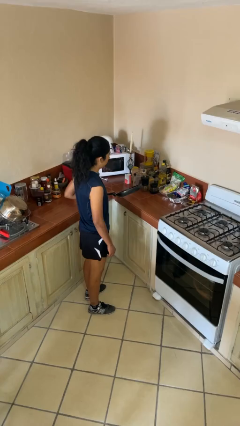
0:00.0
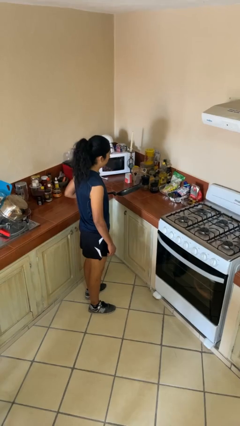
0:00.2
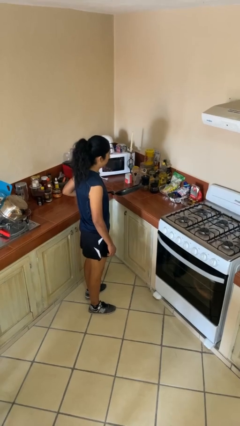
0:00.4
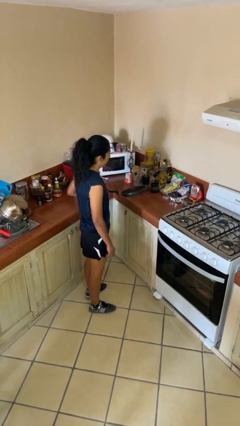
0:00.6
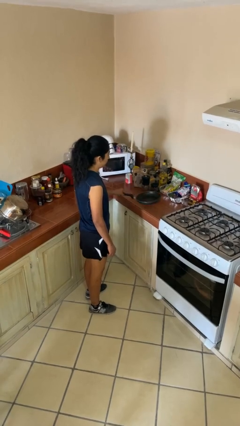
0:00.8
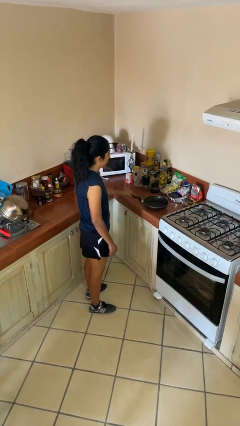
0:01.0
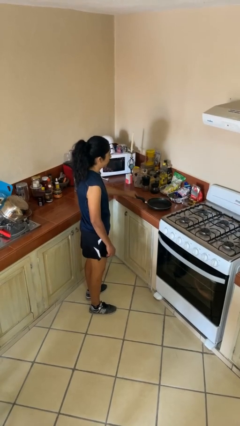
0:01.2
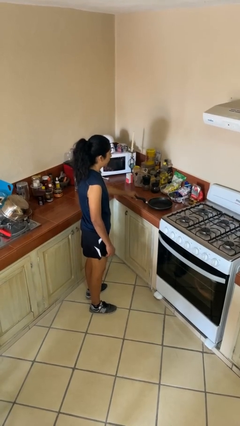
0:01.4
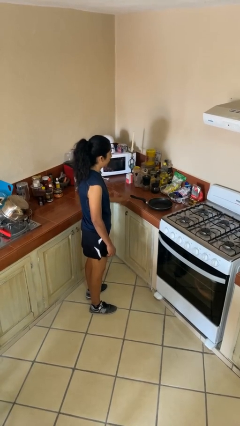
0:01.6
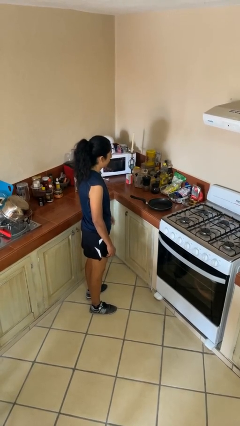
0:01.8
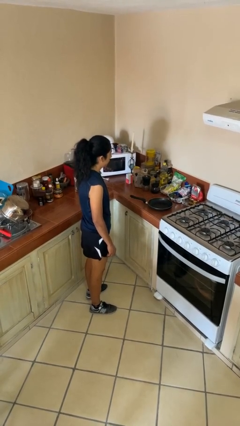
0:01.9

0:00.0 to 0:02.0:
person puts down object on countertop

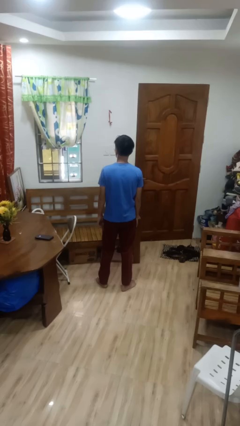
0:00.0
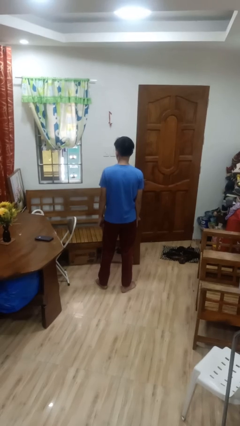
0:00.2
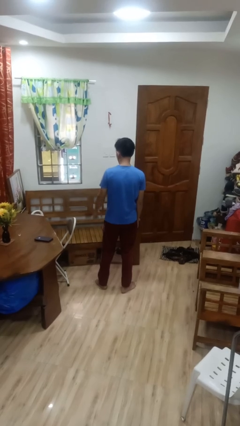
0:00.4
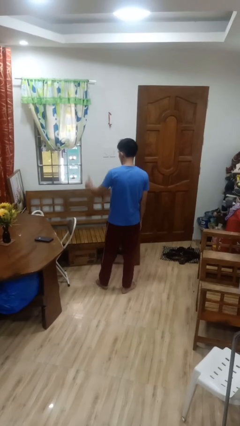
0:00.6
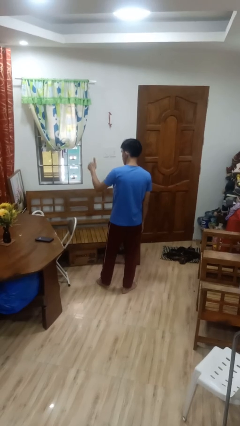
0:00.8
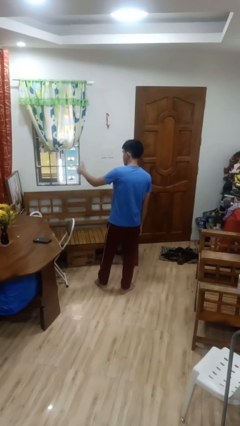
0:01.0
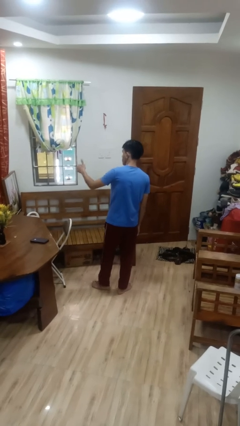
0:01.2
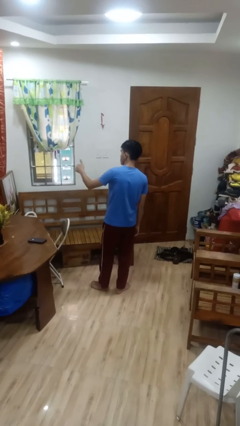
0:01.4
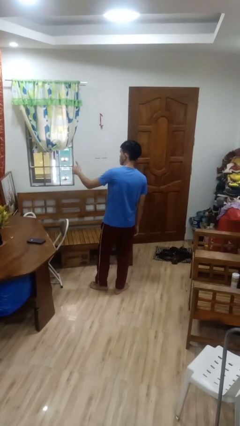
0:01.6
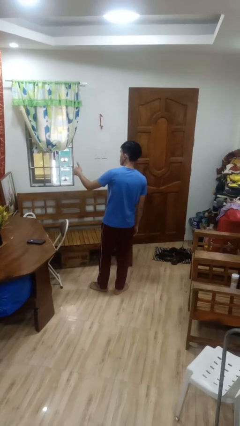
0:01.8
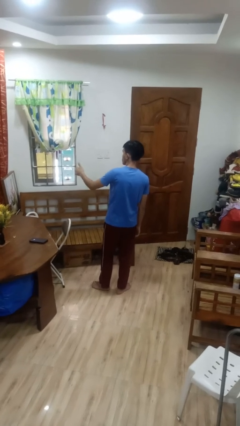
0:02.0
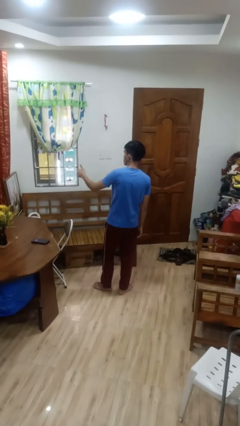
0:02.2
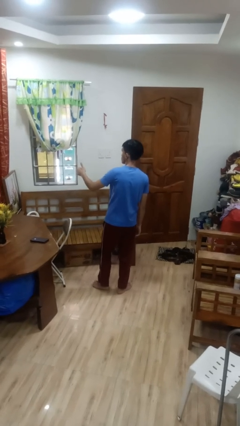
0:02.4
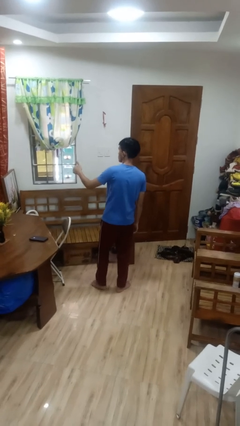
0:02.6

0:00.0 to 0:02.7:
person gestures thumbs up

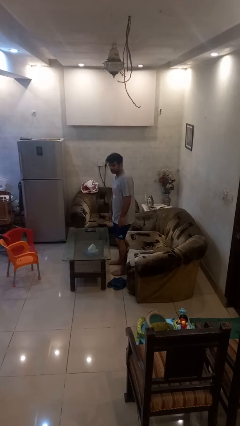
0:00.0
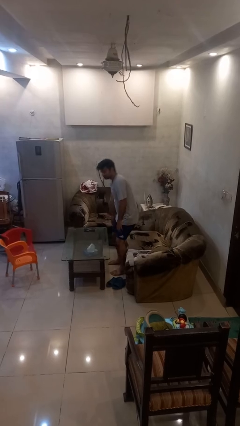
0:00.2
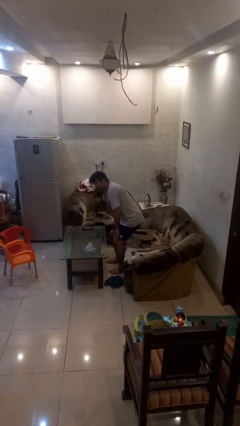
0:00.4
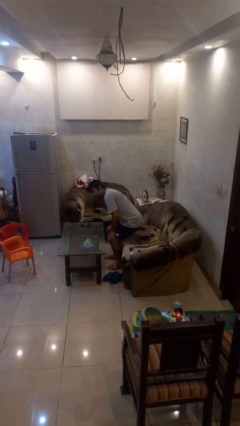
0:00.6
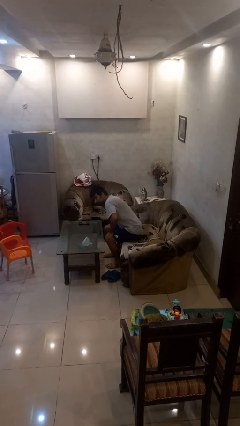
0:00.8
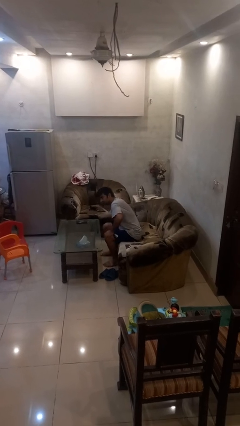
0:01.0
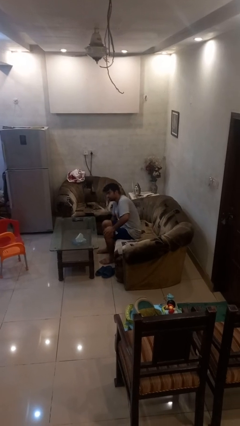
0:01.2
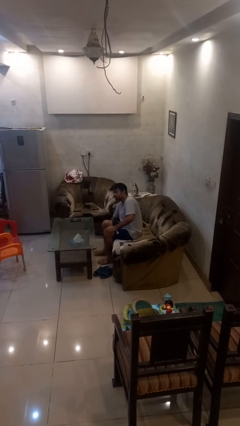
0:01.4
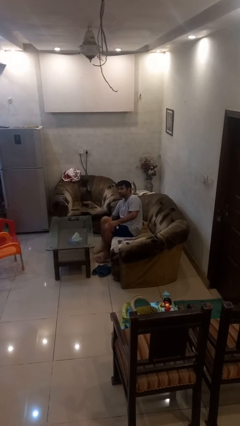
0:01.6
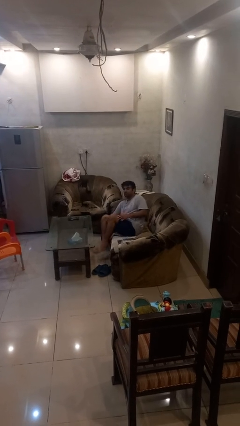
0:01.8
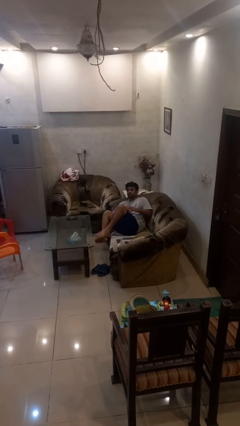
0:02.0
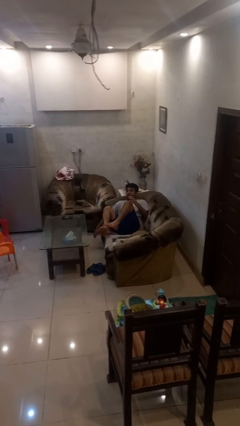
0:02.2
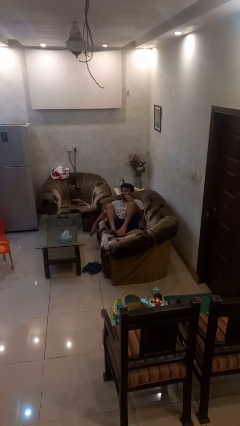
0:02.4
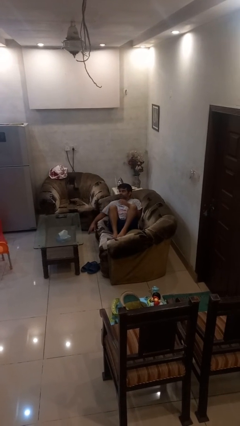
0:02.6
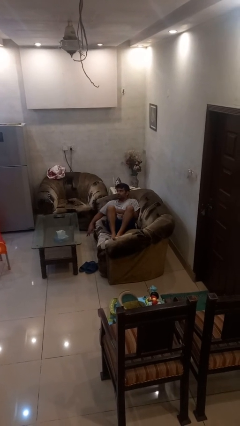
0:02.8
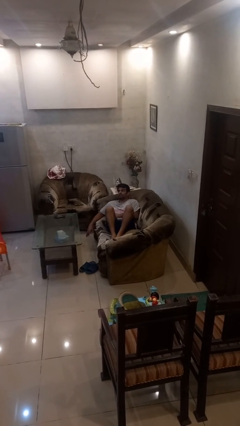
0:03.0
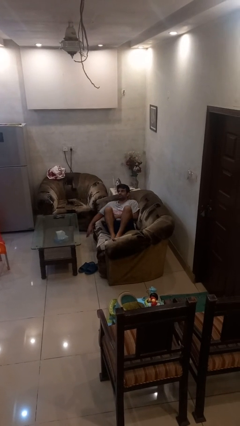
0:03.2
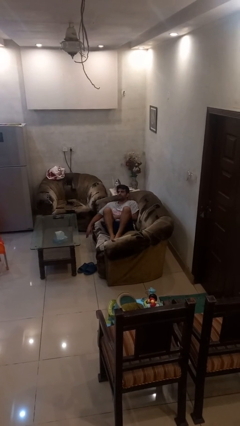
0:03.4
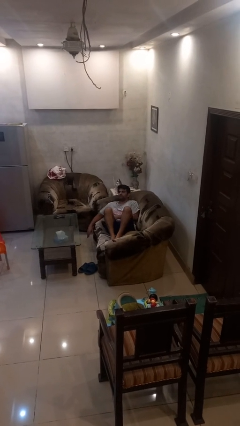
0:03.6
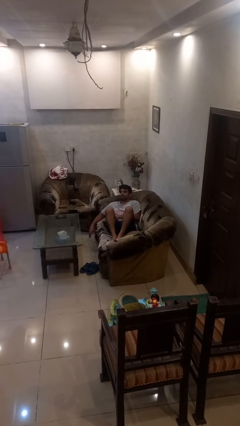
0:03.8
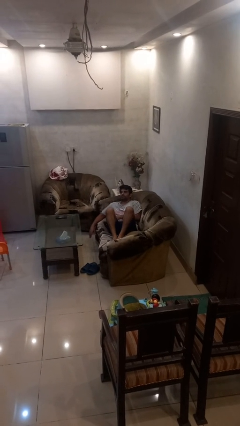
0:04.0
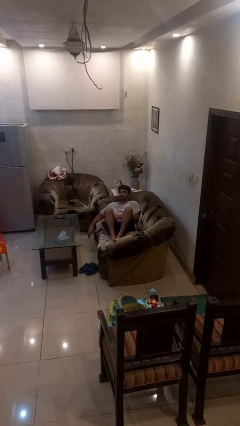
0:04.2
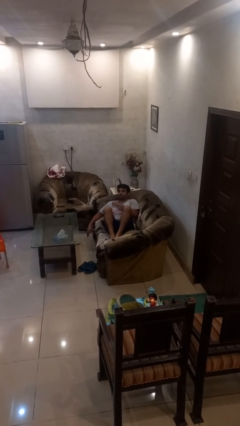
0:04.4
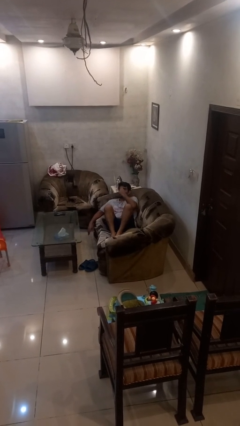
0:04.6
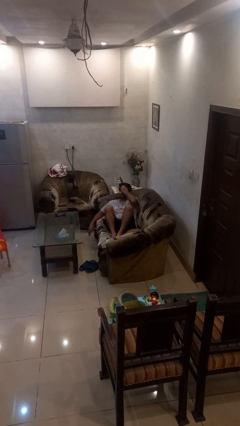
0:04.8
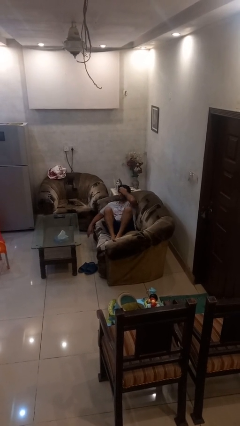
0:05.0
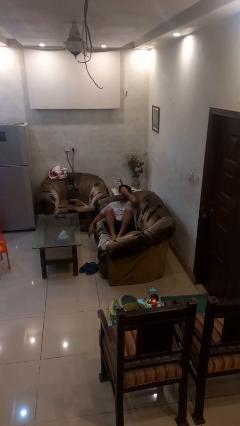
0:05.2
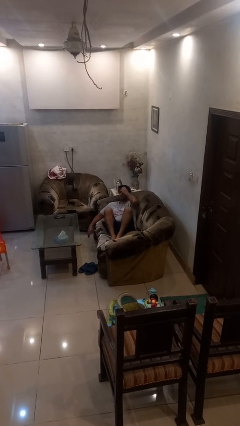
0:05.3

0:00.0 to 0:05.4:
person lies down on couch

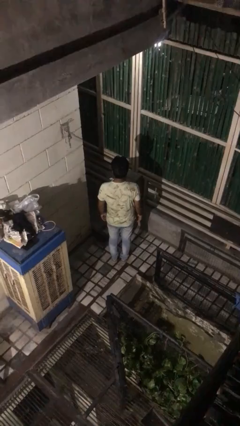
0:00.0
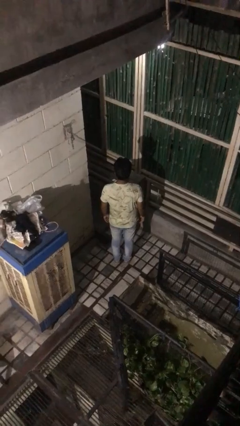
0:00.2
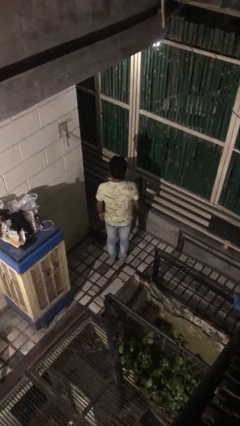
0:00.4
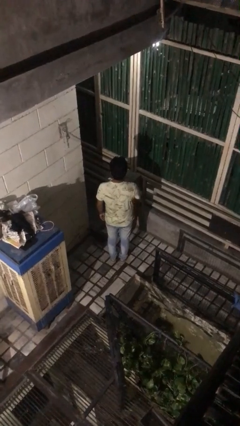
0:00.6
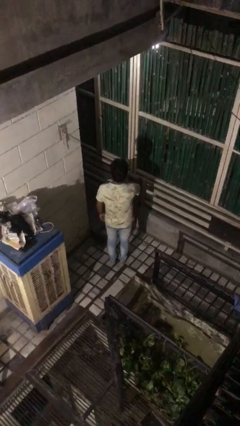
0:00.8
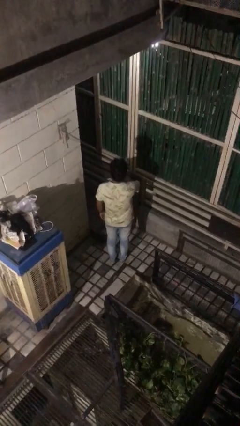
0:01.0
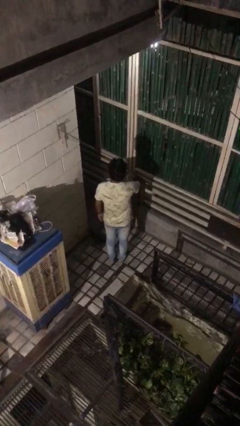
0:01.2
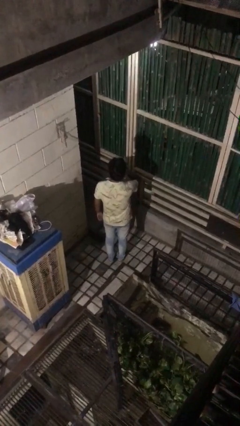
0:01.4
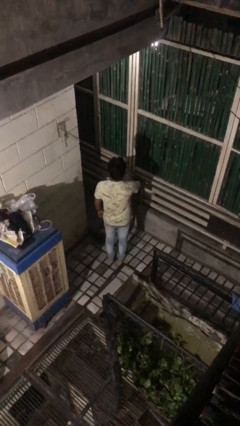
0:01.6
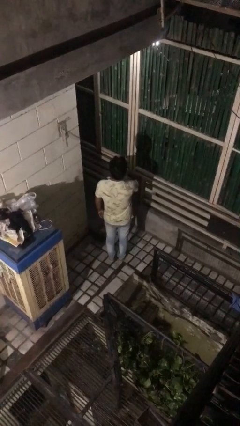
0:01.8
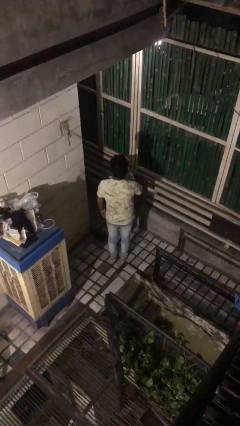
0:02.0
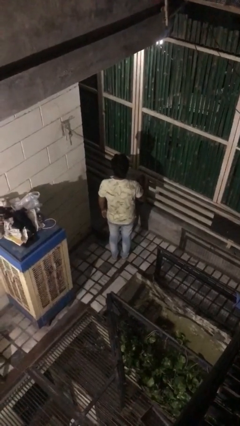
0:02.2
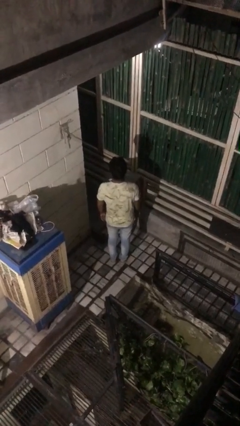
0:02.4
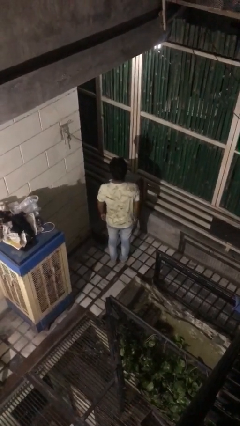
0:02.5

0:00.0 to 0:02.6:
person gestures cut

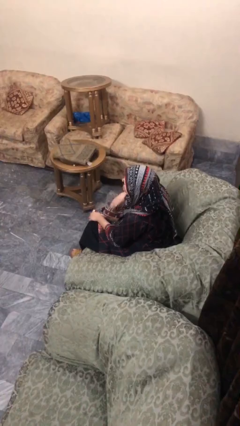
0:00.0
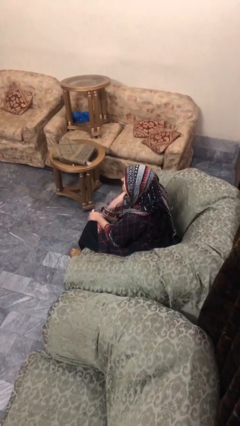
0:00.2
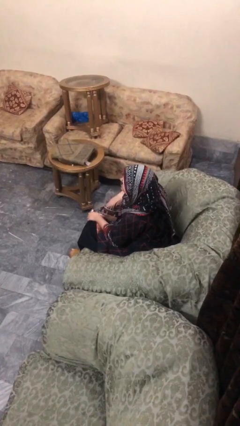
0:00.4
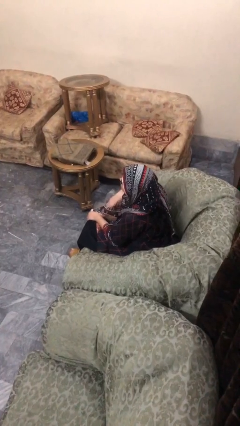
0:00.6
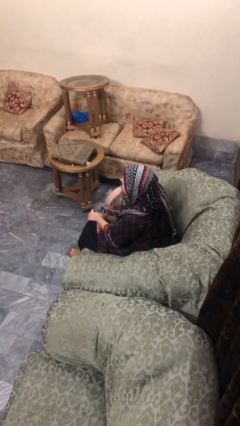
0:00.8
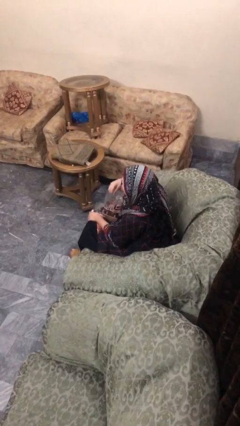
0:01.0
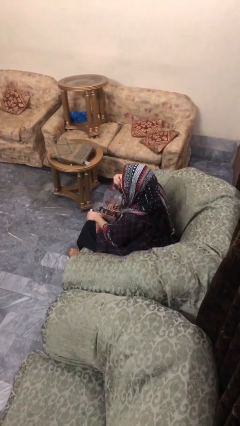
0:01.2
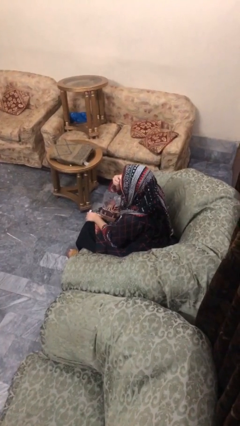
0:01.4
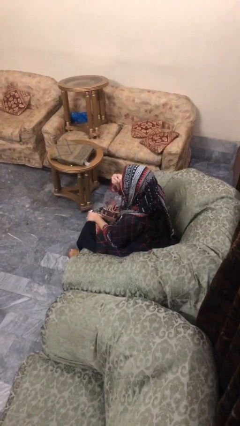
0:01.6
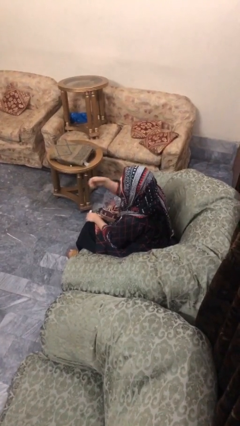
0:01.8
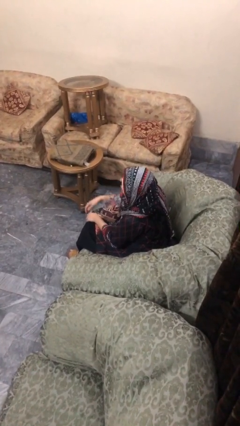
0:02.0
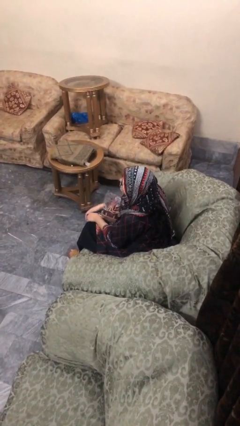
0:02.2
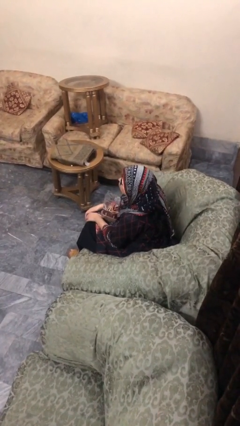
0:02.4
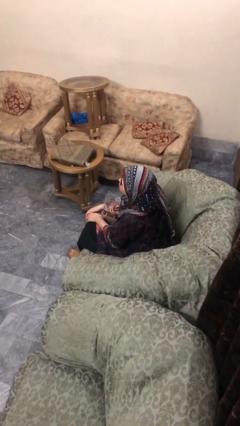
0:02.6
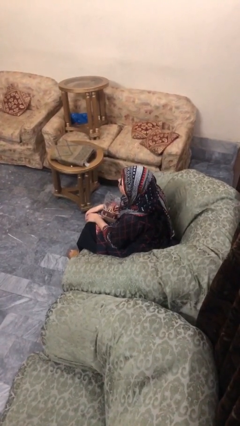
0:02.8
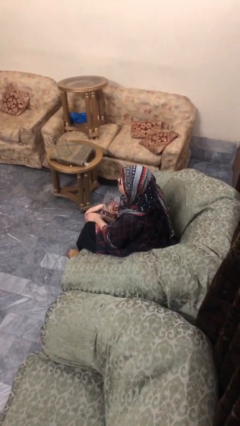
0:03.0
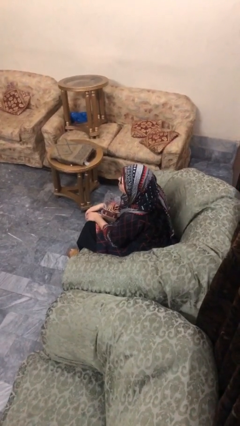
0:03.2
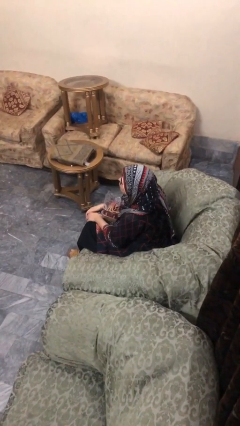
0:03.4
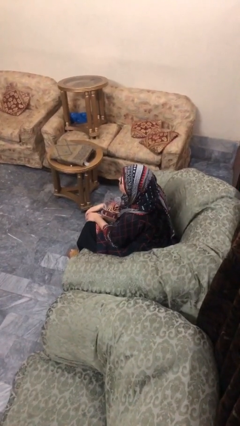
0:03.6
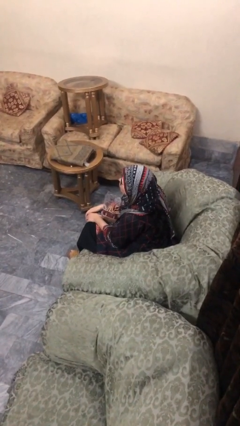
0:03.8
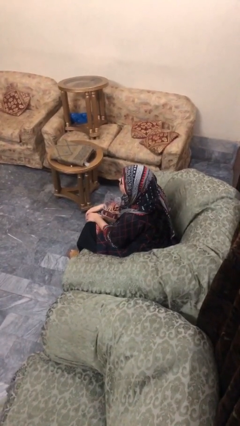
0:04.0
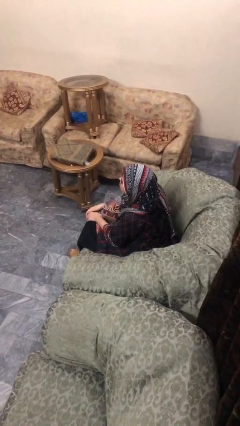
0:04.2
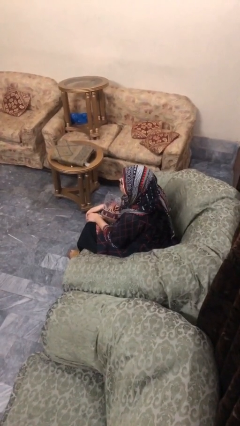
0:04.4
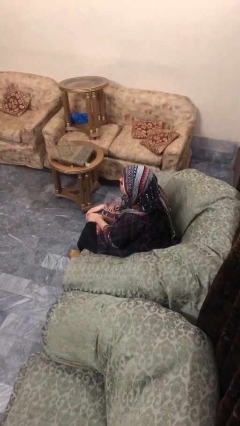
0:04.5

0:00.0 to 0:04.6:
person eats snack from bag

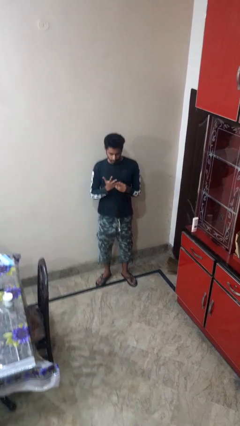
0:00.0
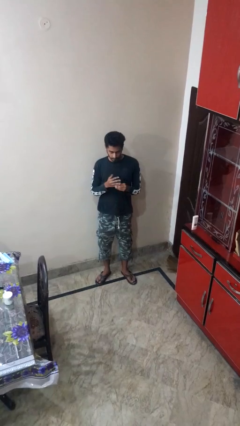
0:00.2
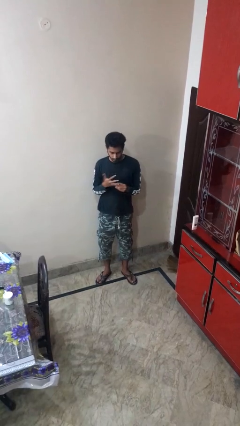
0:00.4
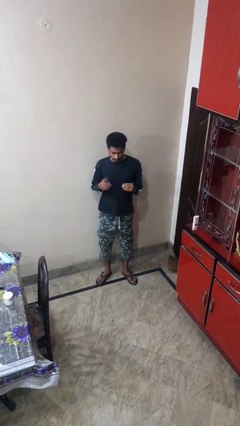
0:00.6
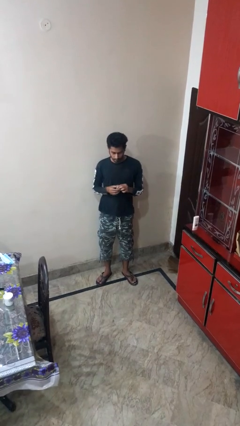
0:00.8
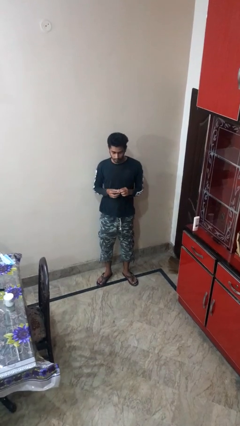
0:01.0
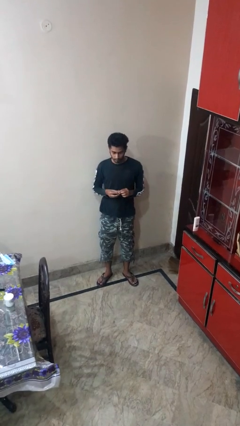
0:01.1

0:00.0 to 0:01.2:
person takes off ring
